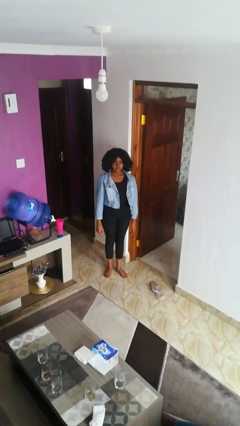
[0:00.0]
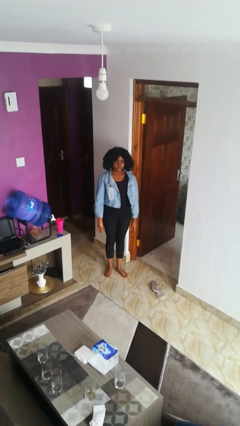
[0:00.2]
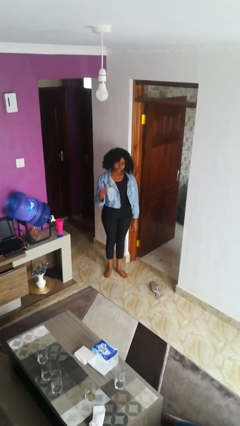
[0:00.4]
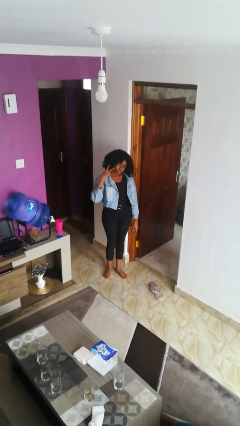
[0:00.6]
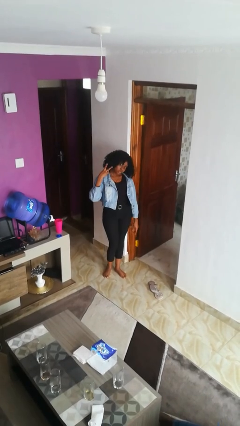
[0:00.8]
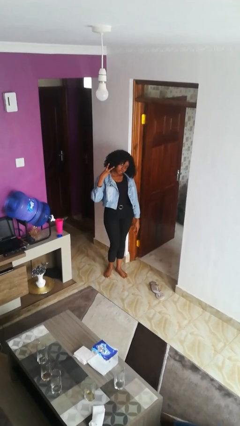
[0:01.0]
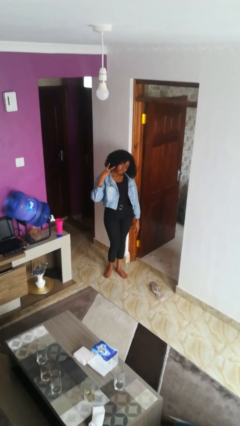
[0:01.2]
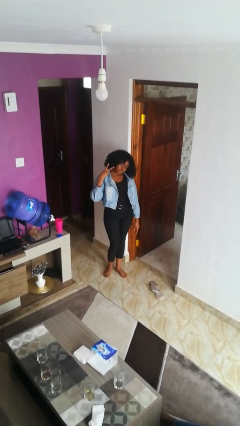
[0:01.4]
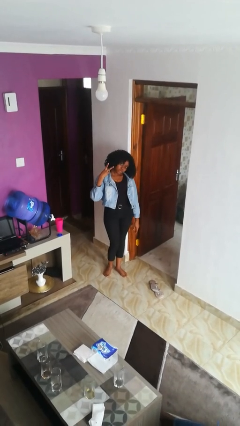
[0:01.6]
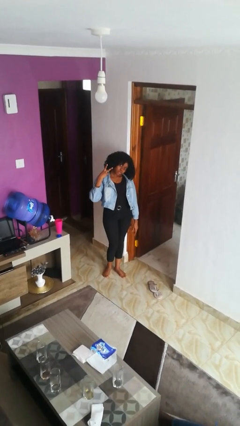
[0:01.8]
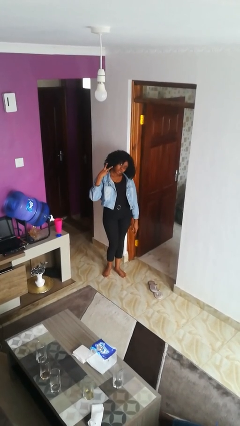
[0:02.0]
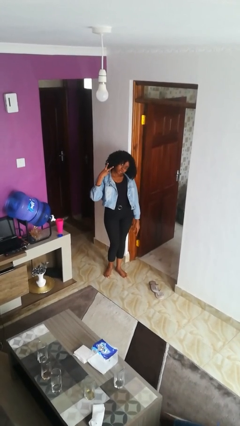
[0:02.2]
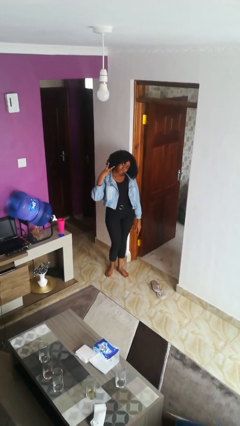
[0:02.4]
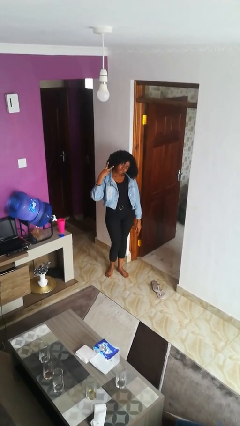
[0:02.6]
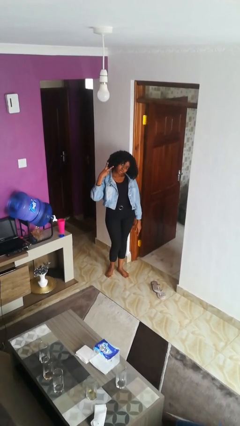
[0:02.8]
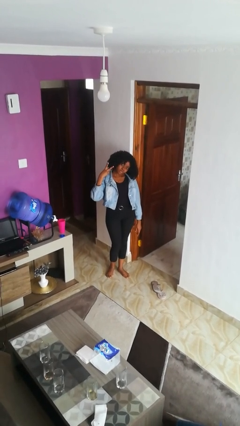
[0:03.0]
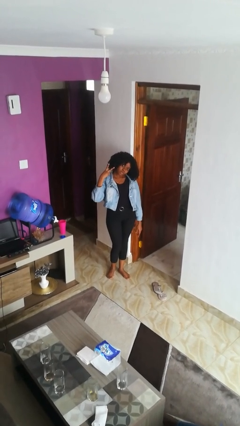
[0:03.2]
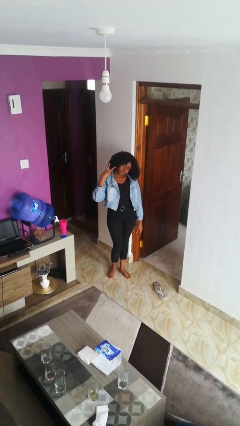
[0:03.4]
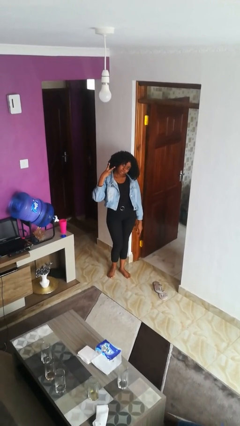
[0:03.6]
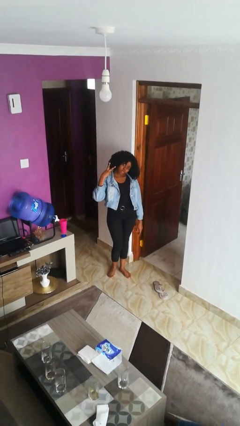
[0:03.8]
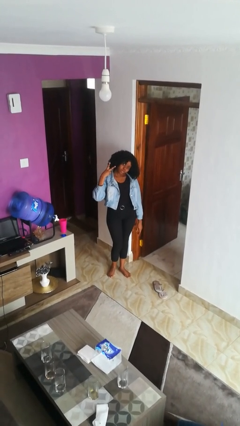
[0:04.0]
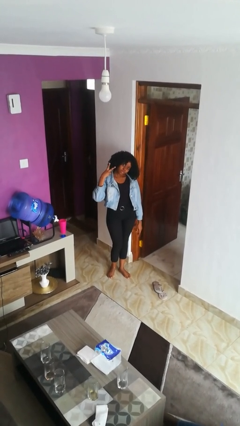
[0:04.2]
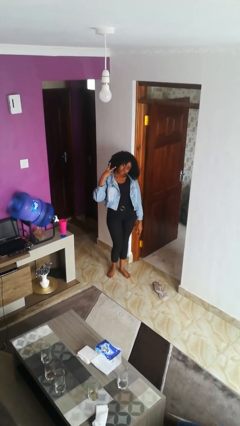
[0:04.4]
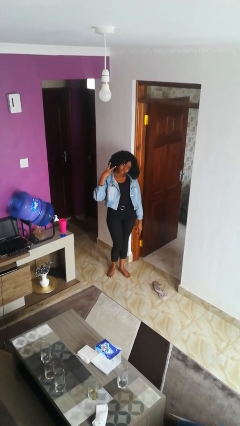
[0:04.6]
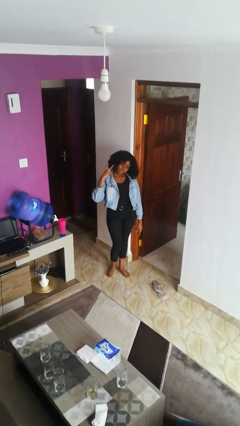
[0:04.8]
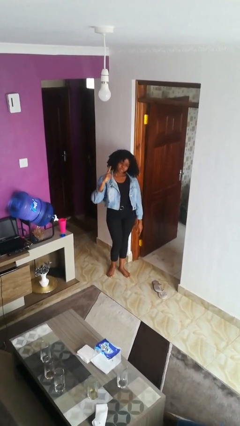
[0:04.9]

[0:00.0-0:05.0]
person gestures peace

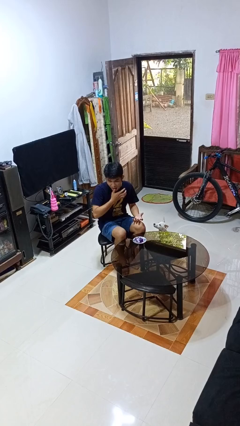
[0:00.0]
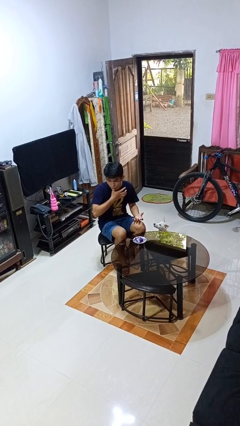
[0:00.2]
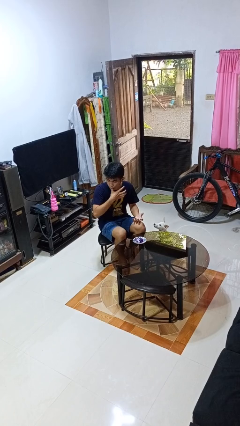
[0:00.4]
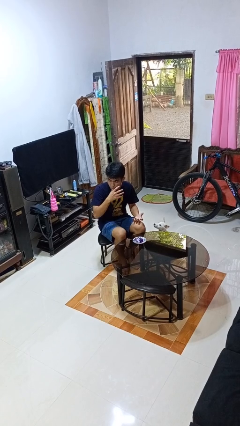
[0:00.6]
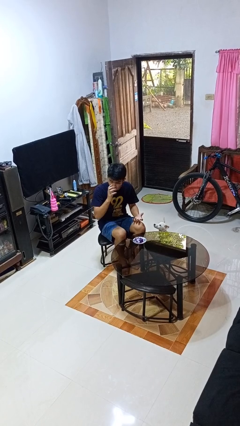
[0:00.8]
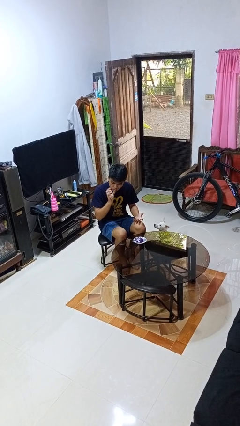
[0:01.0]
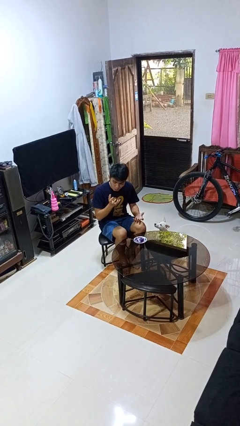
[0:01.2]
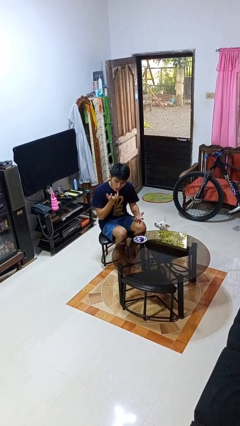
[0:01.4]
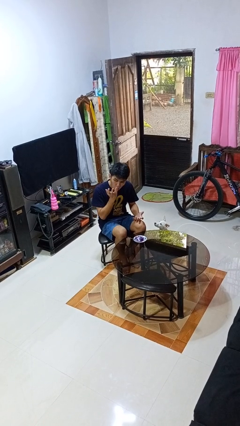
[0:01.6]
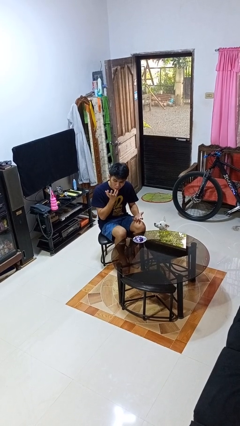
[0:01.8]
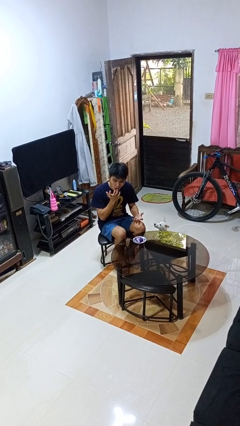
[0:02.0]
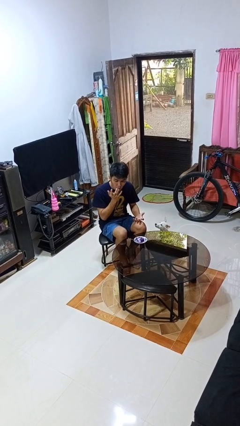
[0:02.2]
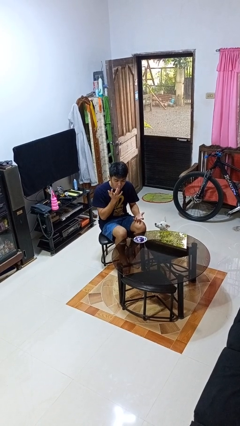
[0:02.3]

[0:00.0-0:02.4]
person licks fingers

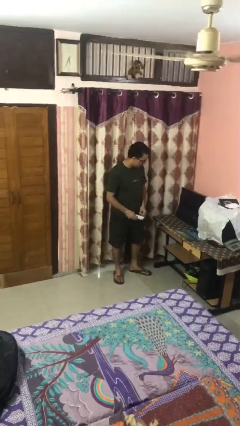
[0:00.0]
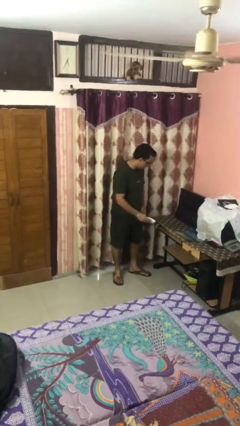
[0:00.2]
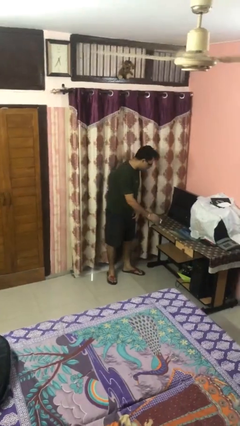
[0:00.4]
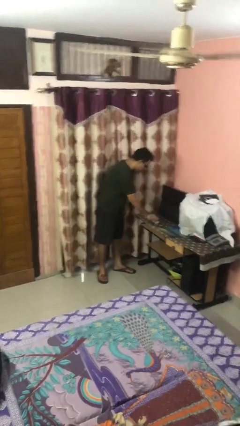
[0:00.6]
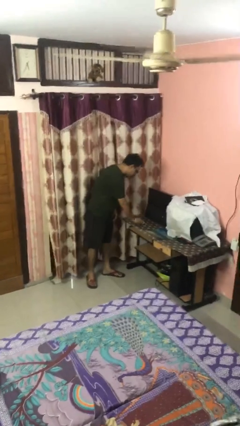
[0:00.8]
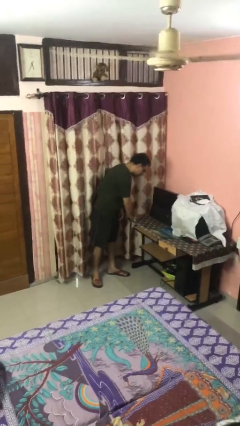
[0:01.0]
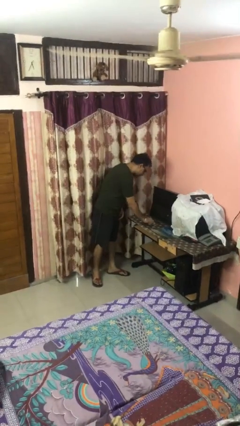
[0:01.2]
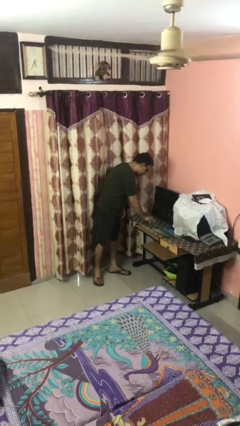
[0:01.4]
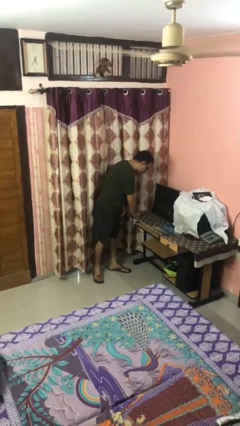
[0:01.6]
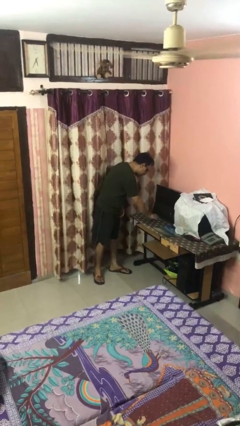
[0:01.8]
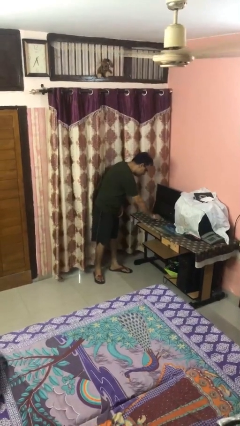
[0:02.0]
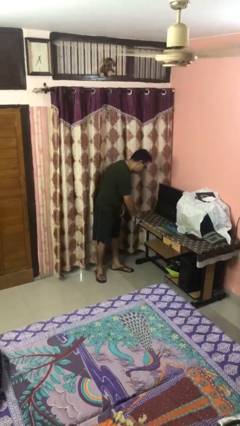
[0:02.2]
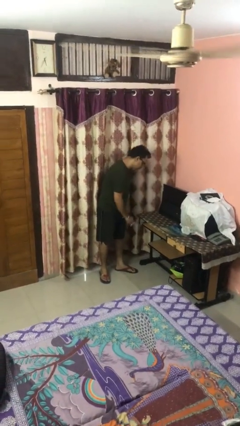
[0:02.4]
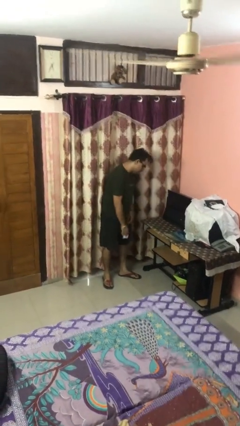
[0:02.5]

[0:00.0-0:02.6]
person cleans table with rag

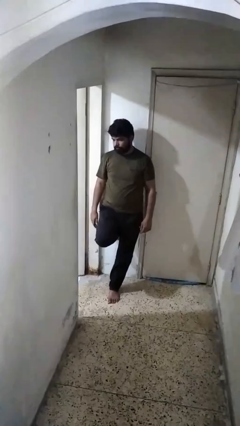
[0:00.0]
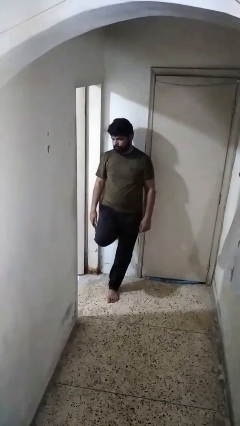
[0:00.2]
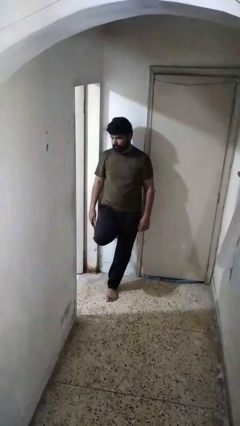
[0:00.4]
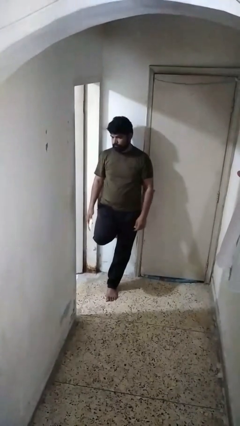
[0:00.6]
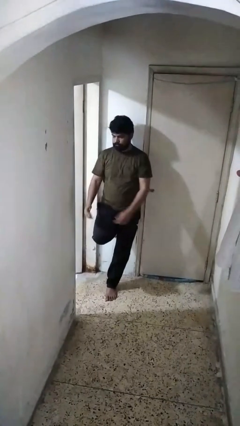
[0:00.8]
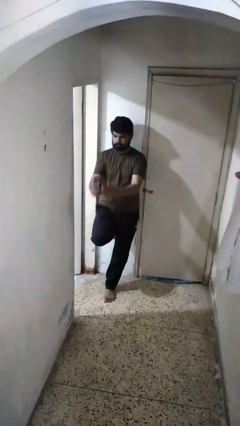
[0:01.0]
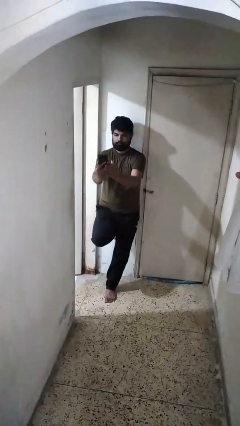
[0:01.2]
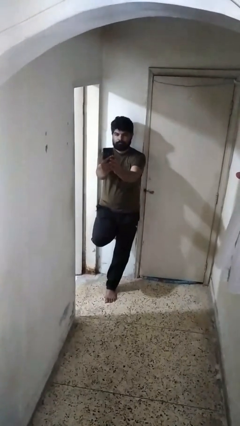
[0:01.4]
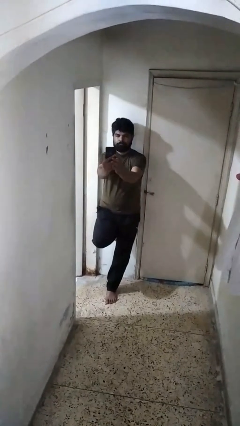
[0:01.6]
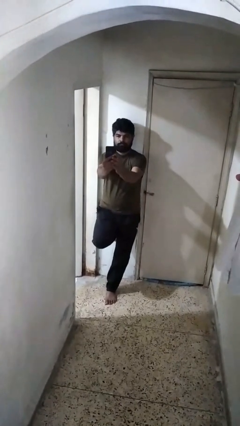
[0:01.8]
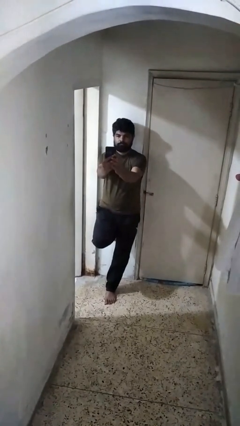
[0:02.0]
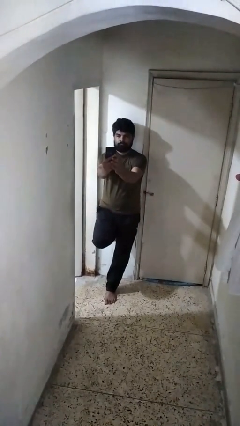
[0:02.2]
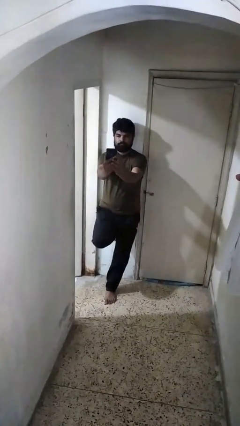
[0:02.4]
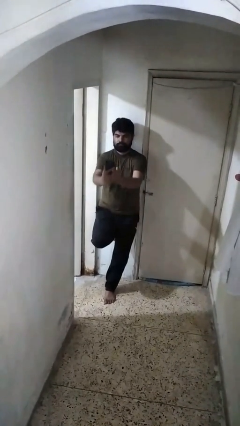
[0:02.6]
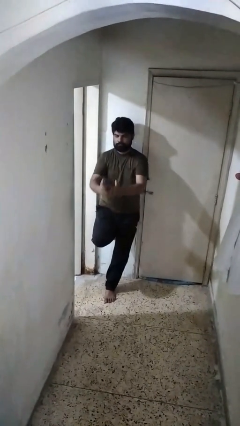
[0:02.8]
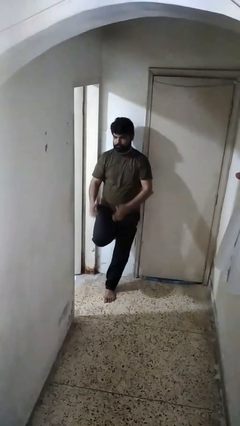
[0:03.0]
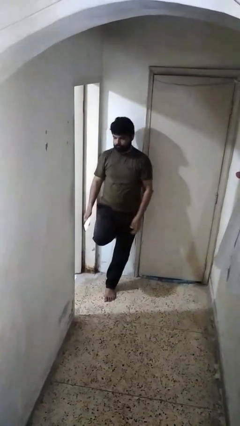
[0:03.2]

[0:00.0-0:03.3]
person takes selfie

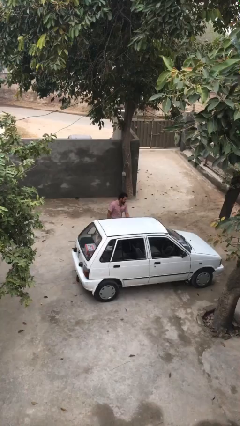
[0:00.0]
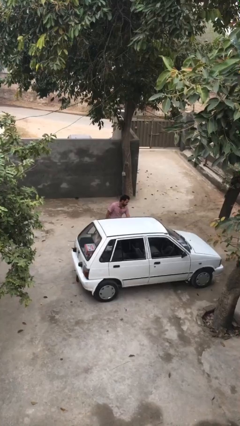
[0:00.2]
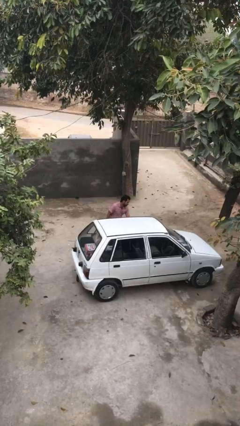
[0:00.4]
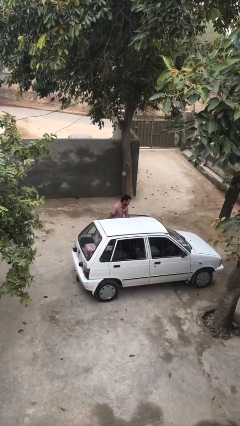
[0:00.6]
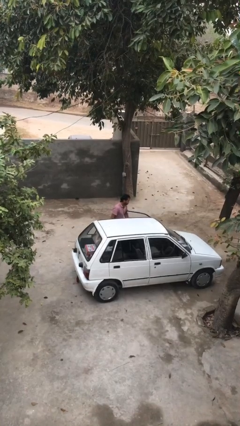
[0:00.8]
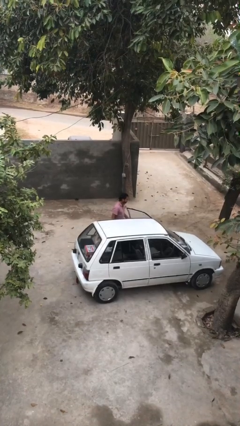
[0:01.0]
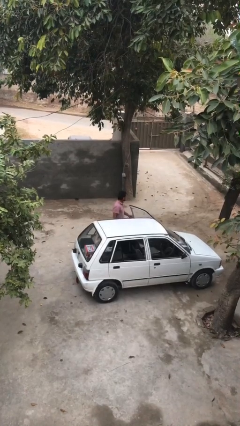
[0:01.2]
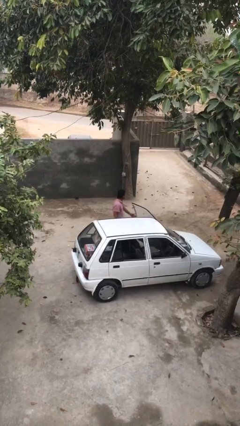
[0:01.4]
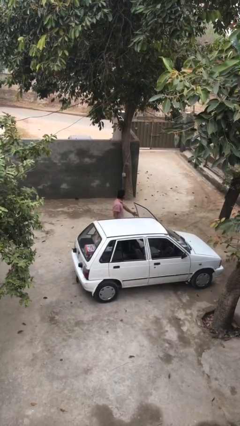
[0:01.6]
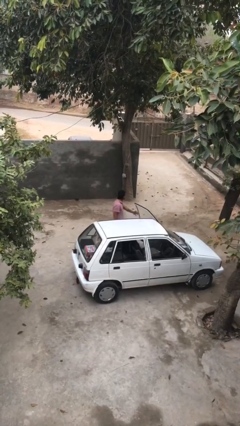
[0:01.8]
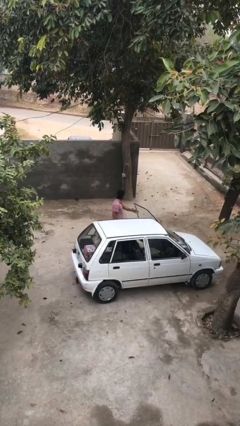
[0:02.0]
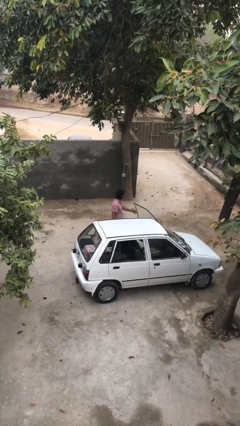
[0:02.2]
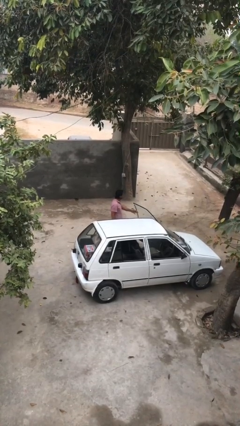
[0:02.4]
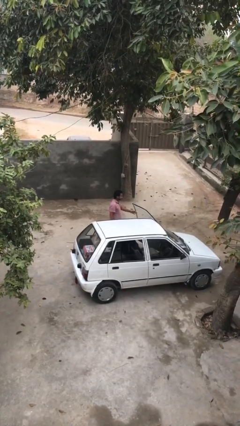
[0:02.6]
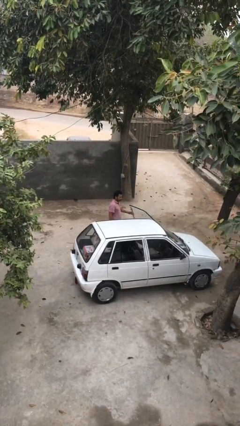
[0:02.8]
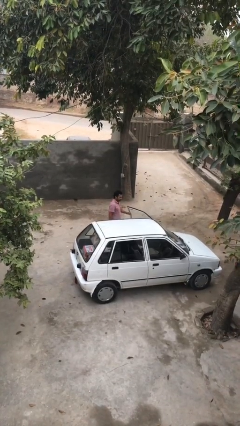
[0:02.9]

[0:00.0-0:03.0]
person opens car door

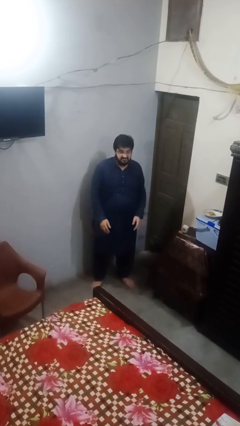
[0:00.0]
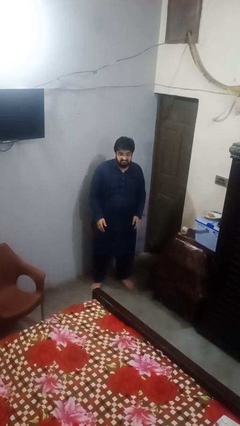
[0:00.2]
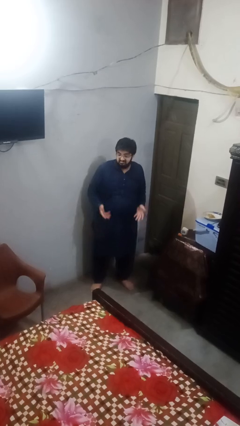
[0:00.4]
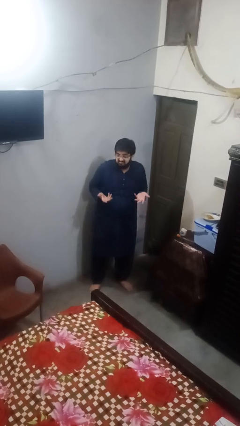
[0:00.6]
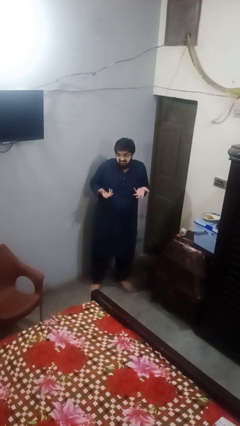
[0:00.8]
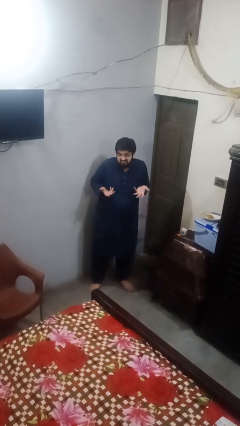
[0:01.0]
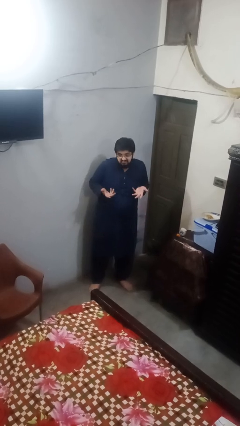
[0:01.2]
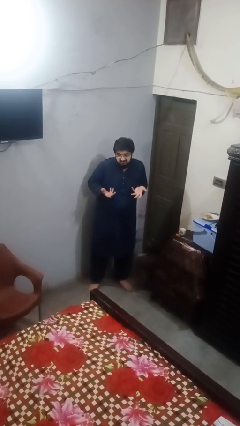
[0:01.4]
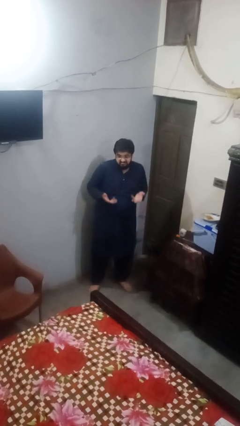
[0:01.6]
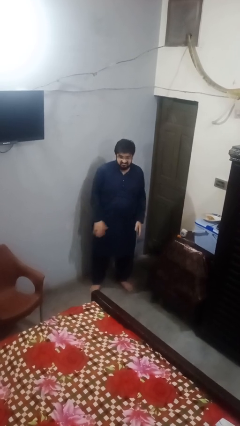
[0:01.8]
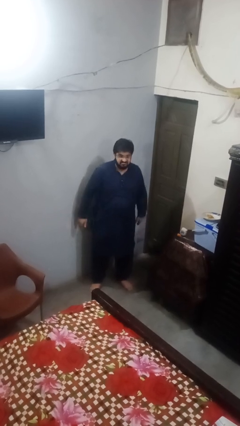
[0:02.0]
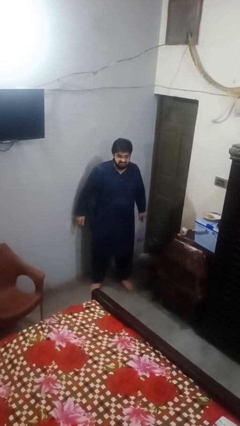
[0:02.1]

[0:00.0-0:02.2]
person shrugs
